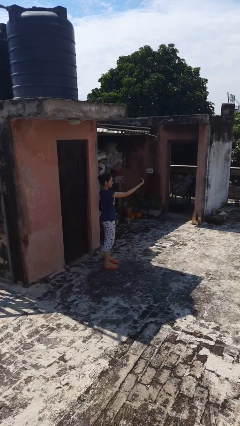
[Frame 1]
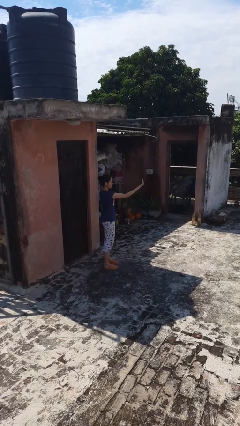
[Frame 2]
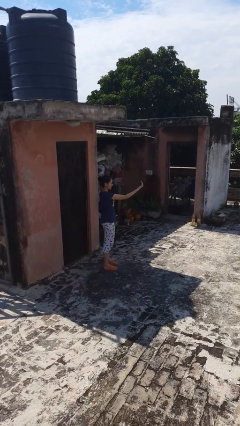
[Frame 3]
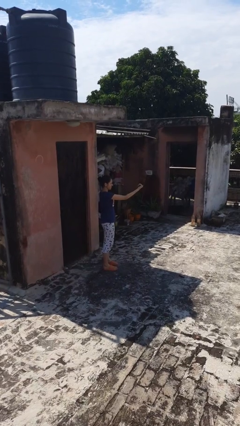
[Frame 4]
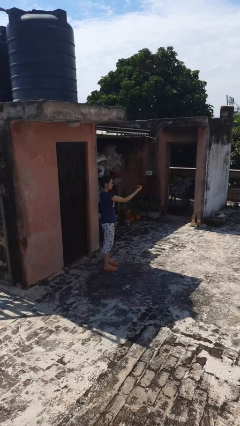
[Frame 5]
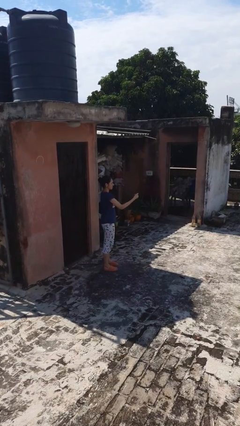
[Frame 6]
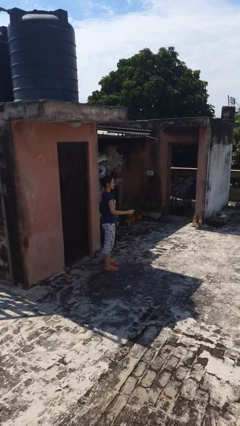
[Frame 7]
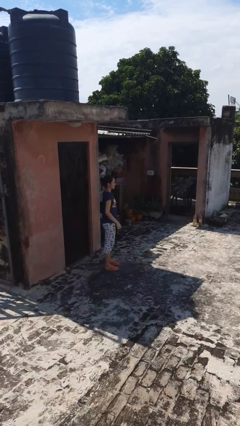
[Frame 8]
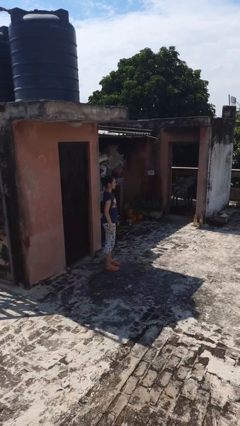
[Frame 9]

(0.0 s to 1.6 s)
person gestures come here

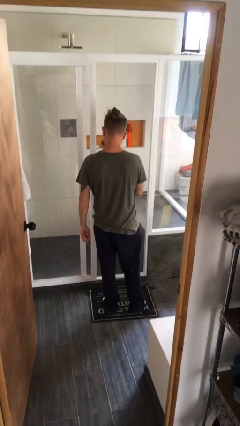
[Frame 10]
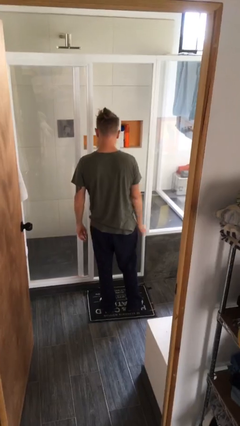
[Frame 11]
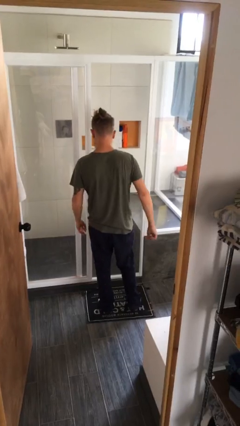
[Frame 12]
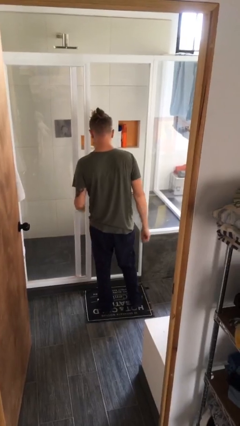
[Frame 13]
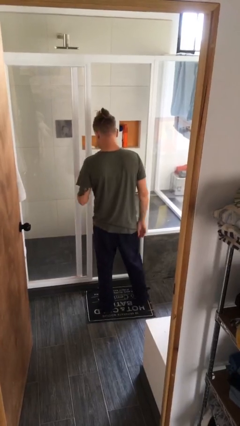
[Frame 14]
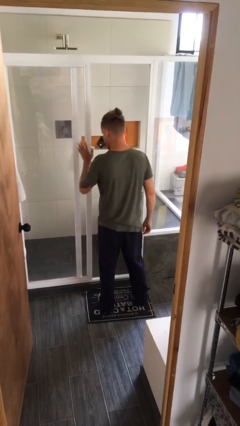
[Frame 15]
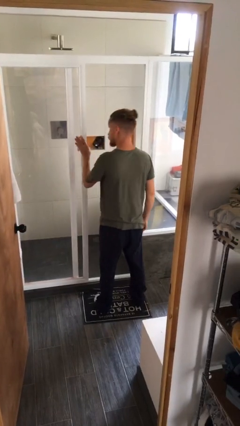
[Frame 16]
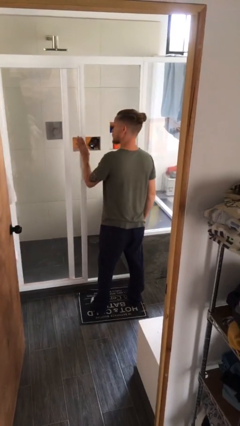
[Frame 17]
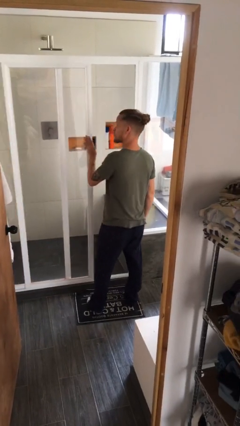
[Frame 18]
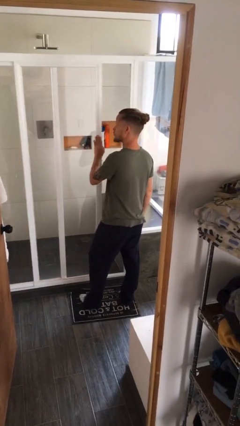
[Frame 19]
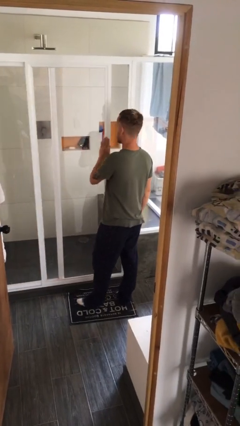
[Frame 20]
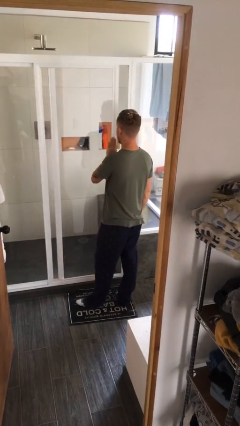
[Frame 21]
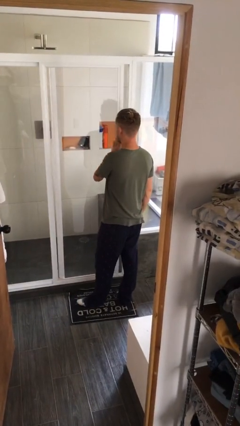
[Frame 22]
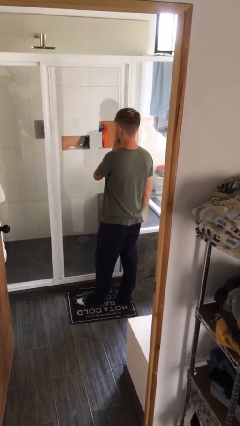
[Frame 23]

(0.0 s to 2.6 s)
person closes sliding door

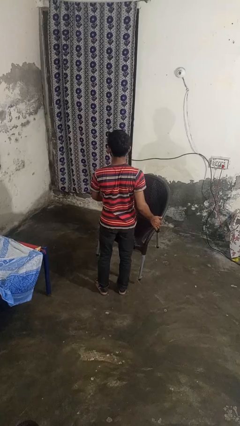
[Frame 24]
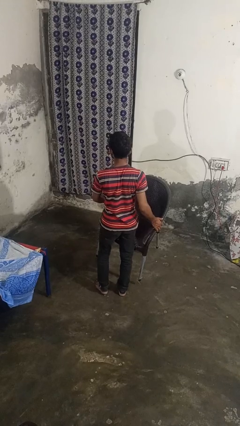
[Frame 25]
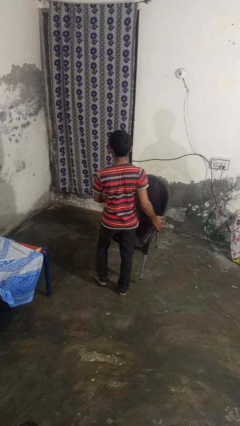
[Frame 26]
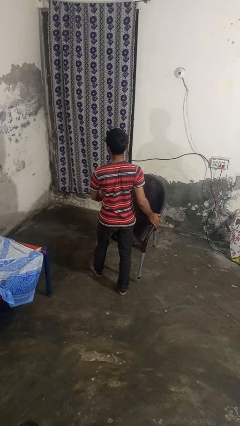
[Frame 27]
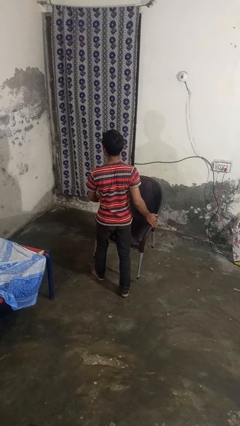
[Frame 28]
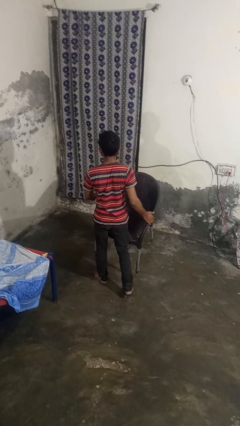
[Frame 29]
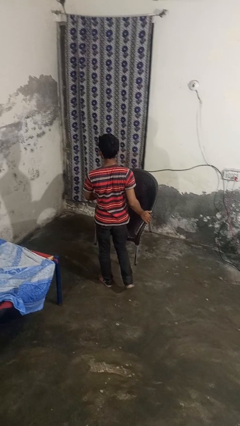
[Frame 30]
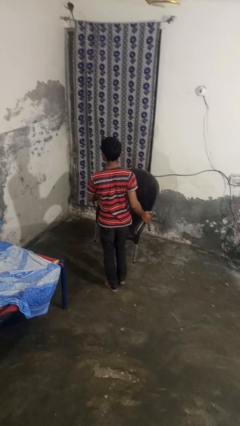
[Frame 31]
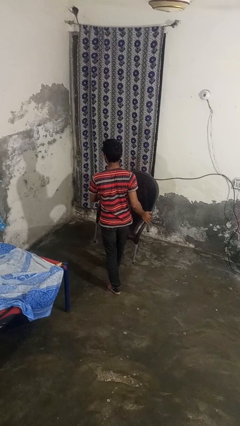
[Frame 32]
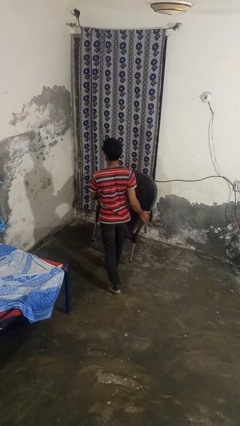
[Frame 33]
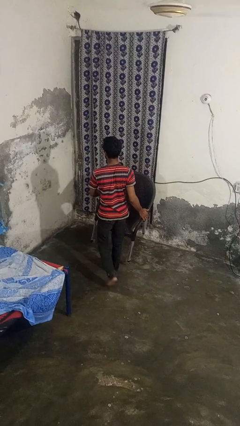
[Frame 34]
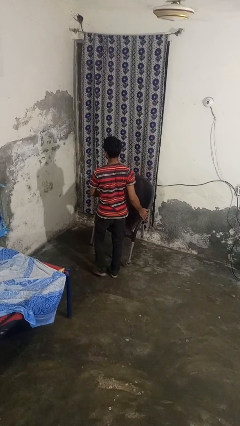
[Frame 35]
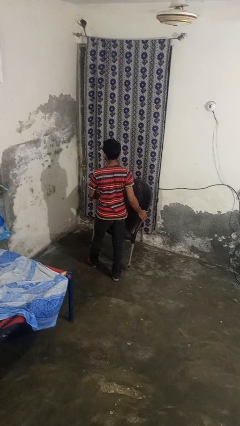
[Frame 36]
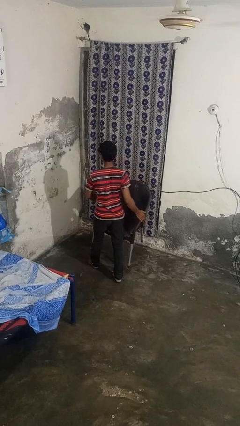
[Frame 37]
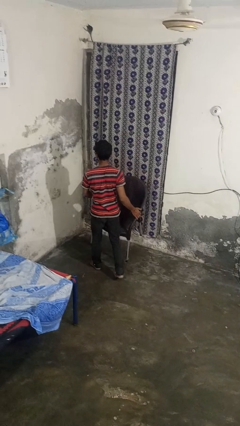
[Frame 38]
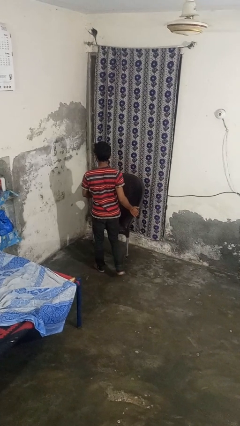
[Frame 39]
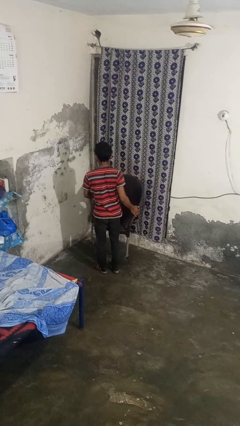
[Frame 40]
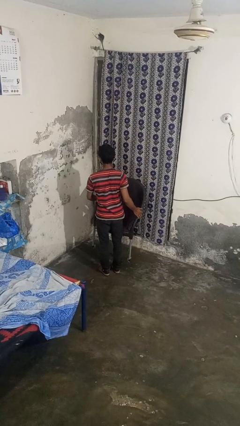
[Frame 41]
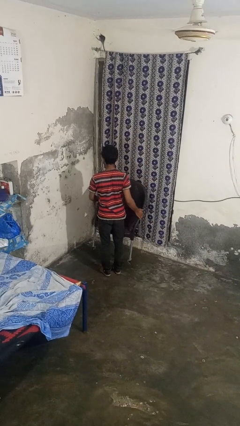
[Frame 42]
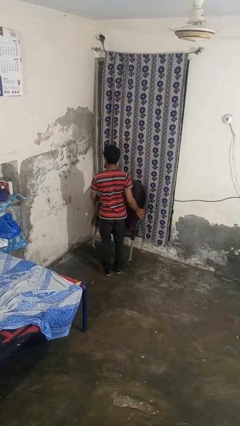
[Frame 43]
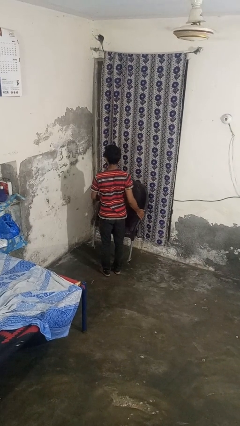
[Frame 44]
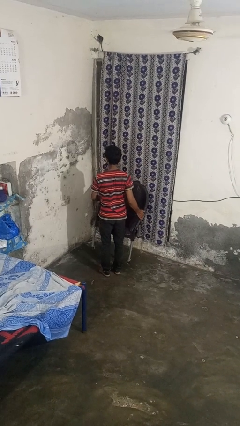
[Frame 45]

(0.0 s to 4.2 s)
person carries furniture

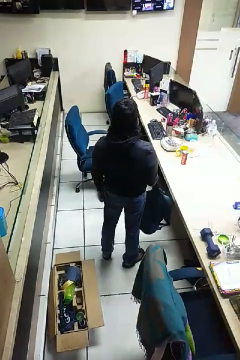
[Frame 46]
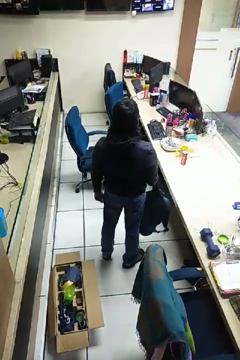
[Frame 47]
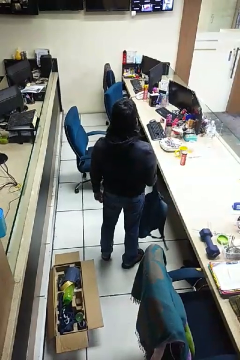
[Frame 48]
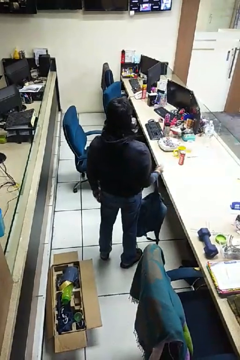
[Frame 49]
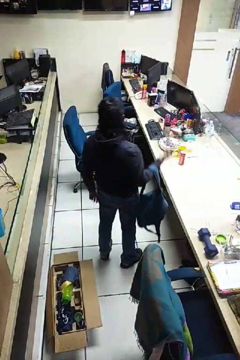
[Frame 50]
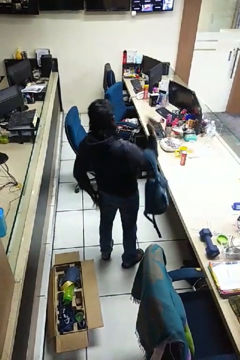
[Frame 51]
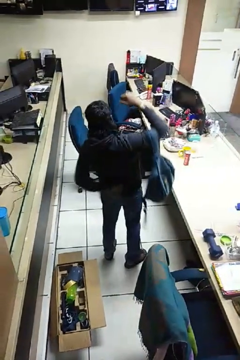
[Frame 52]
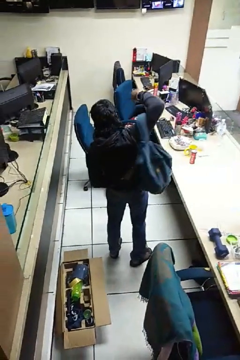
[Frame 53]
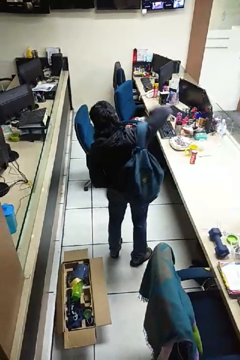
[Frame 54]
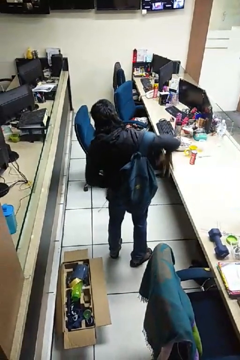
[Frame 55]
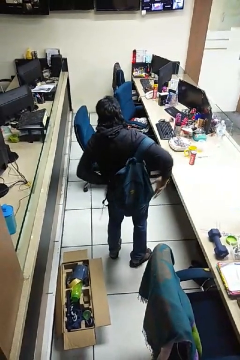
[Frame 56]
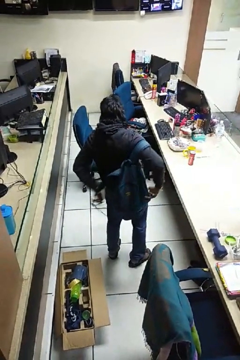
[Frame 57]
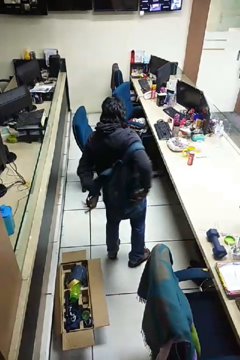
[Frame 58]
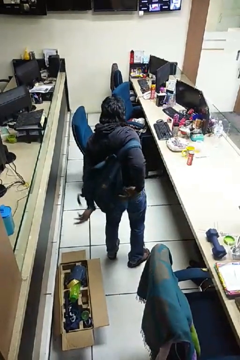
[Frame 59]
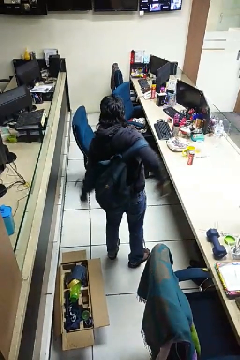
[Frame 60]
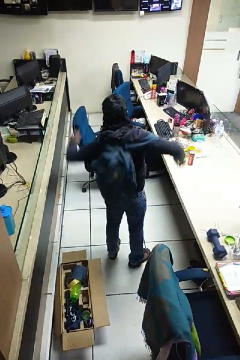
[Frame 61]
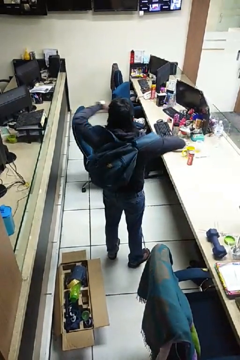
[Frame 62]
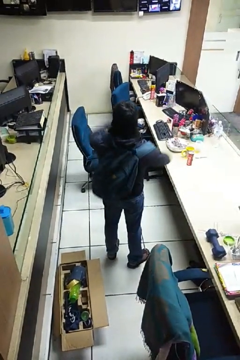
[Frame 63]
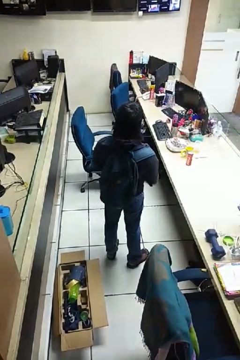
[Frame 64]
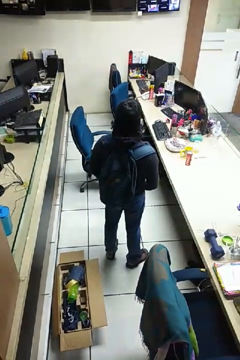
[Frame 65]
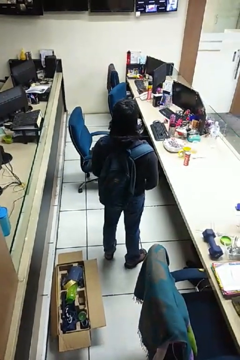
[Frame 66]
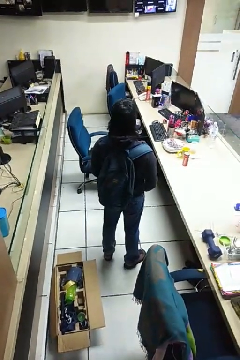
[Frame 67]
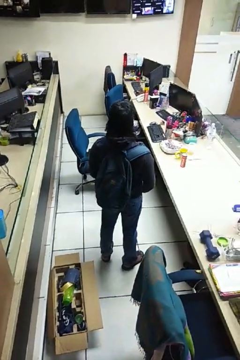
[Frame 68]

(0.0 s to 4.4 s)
person puts on backpack

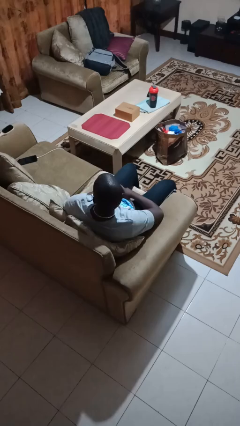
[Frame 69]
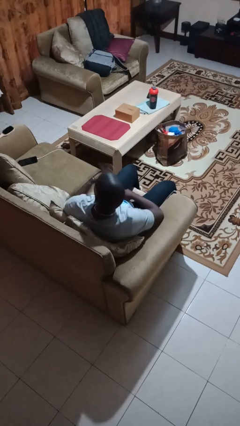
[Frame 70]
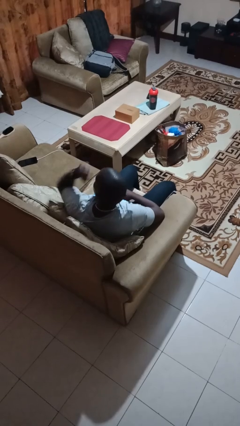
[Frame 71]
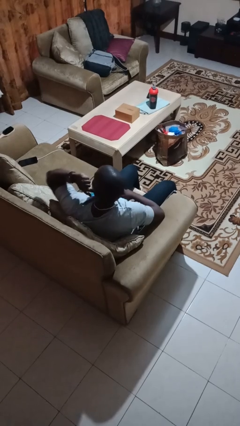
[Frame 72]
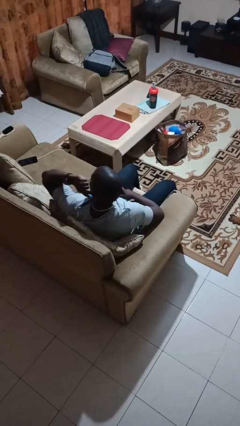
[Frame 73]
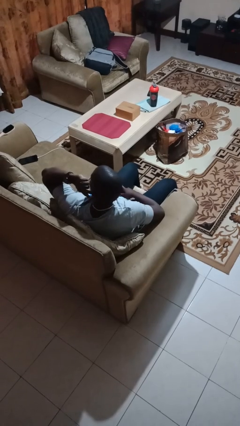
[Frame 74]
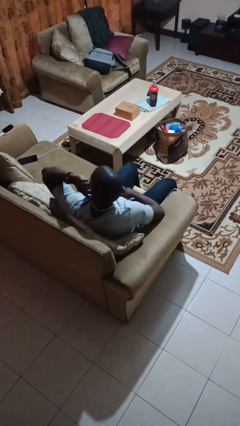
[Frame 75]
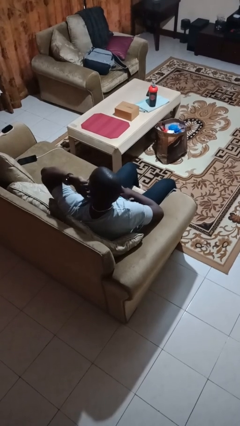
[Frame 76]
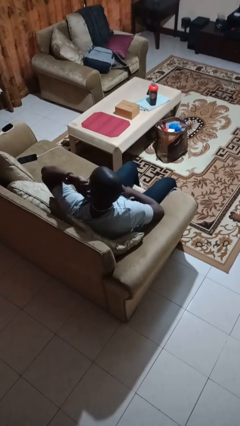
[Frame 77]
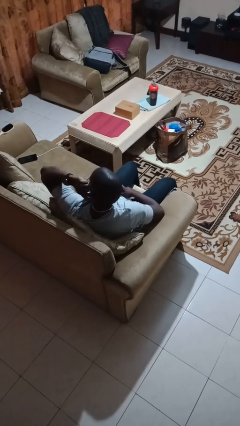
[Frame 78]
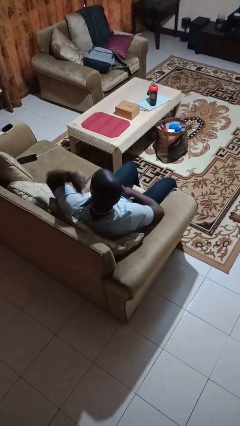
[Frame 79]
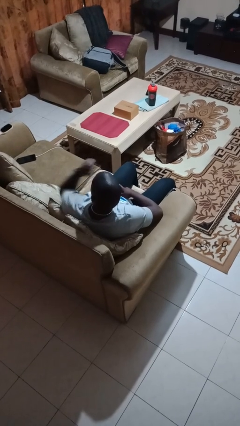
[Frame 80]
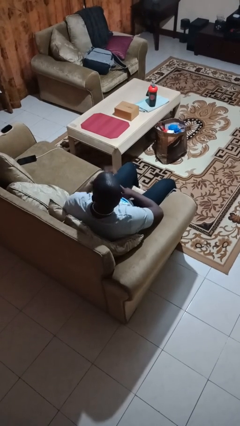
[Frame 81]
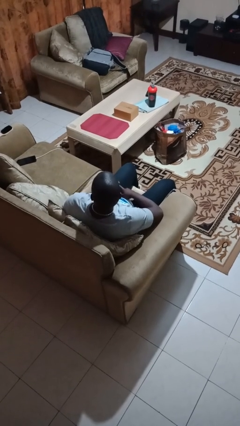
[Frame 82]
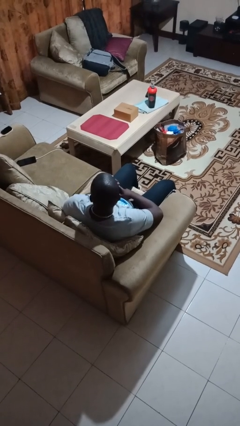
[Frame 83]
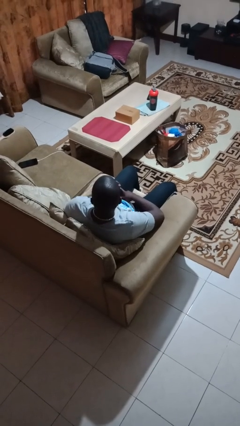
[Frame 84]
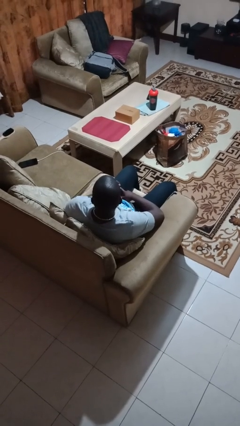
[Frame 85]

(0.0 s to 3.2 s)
person gestures listen closely

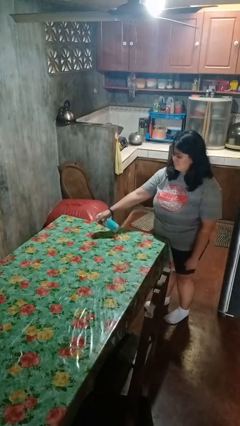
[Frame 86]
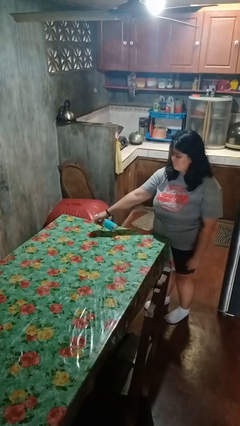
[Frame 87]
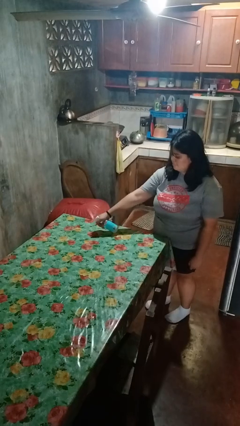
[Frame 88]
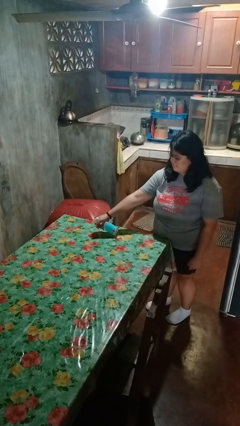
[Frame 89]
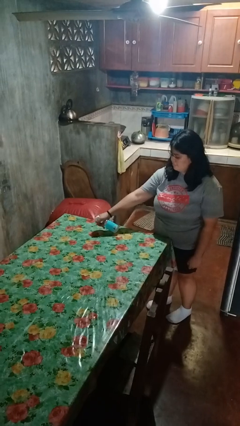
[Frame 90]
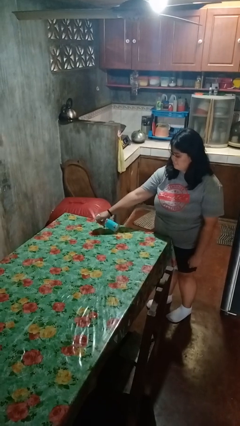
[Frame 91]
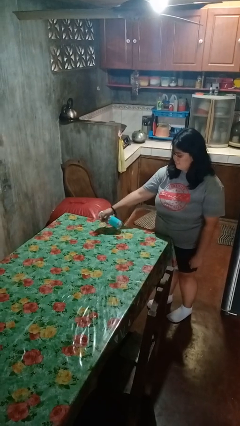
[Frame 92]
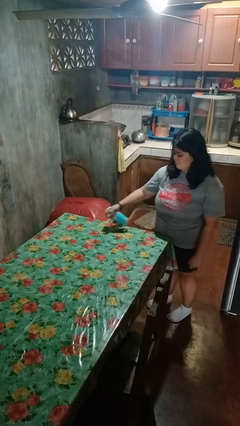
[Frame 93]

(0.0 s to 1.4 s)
person sprays from bottle

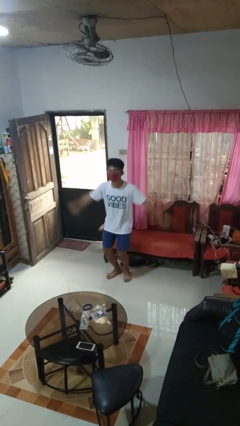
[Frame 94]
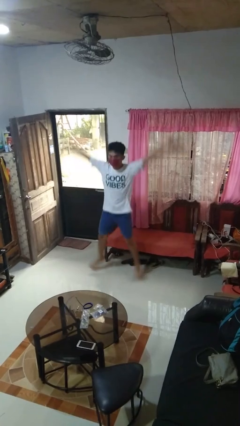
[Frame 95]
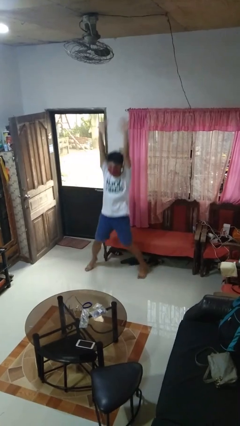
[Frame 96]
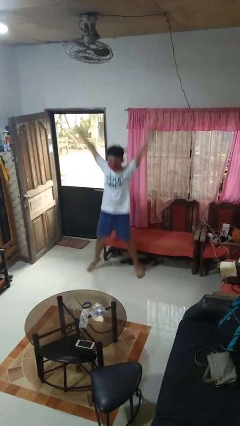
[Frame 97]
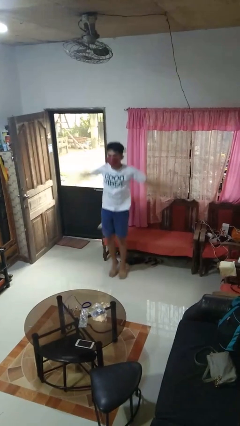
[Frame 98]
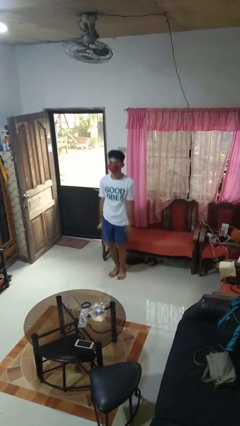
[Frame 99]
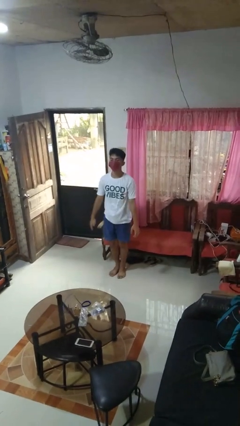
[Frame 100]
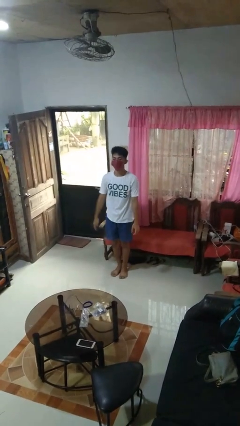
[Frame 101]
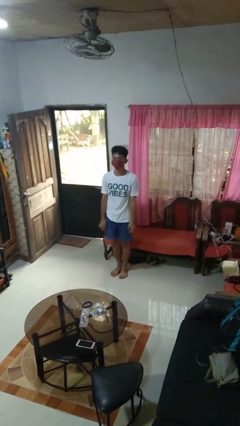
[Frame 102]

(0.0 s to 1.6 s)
person exercises with jumping jacks
